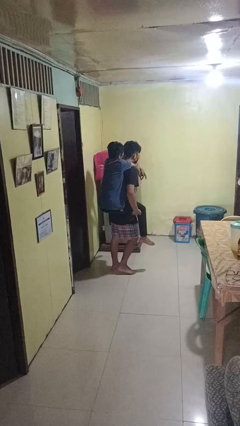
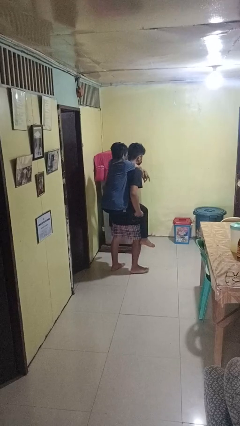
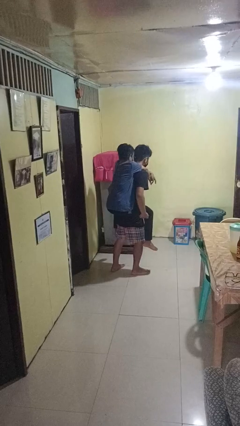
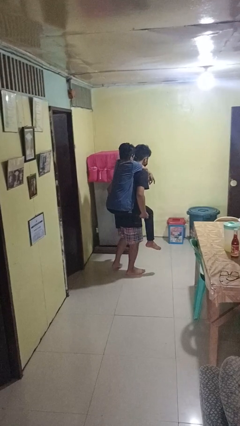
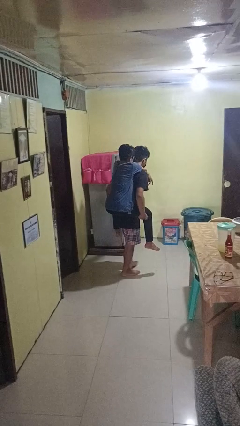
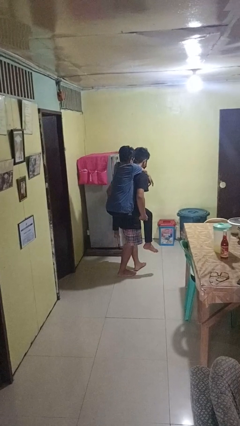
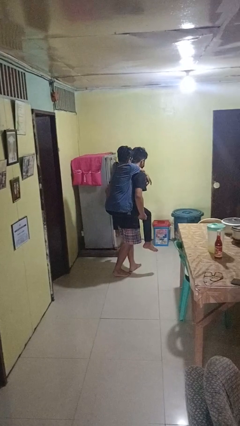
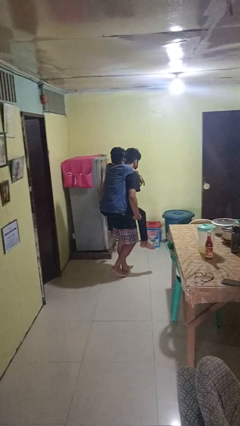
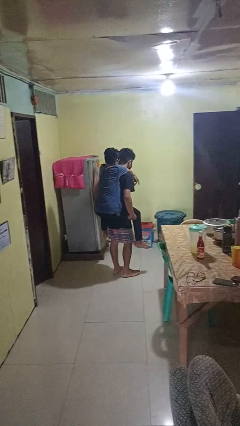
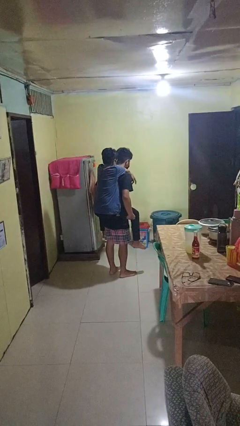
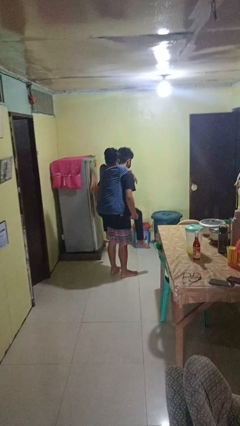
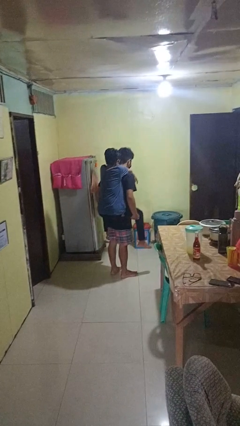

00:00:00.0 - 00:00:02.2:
person carries person on back

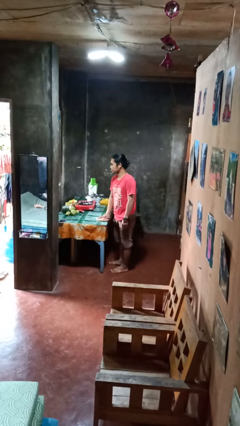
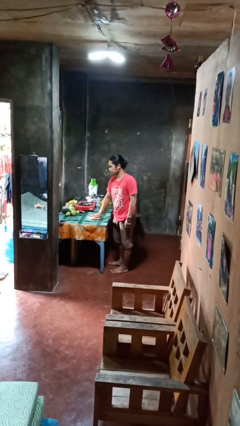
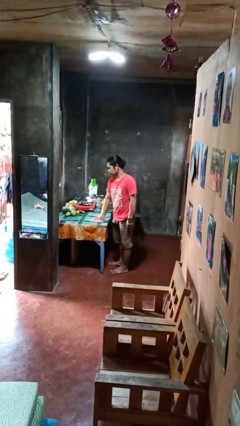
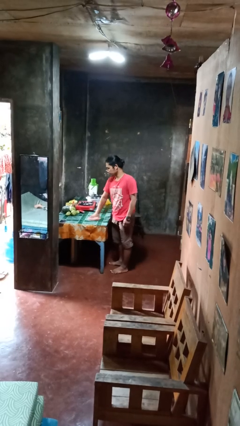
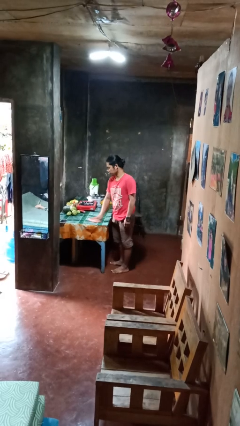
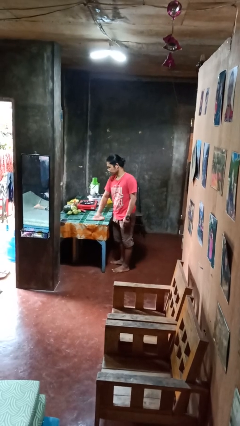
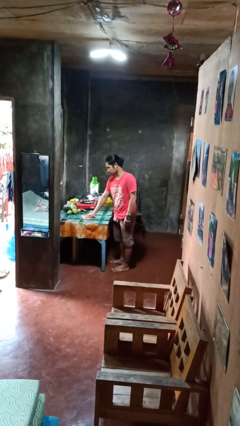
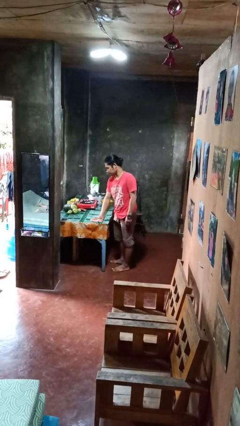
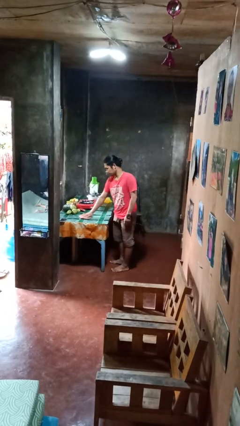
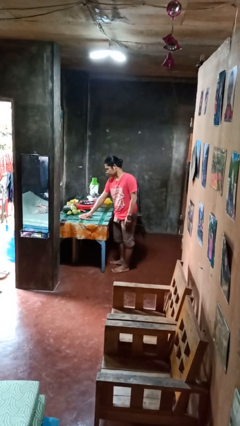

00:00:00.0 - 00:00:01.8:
person cleans table with rag

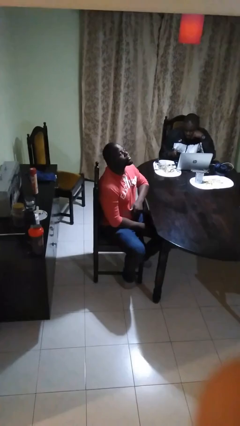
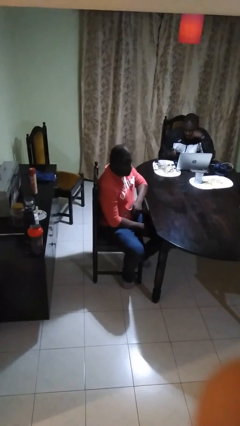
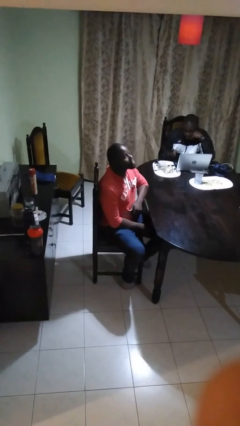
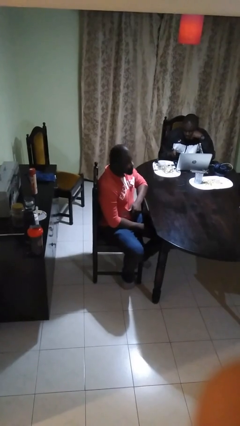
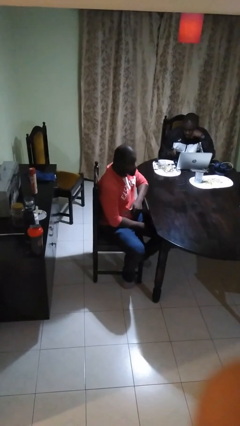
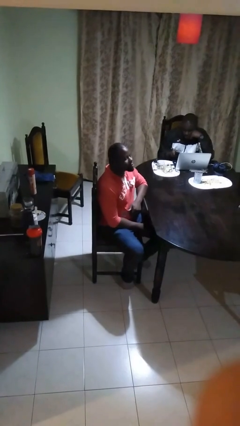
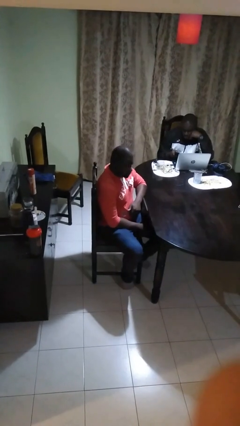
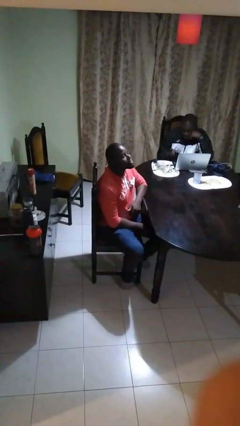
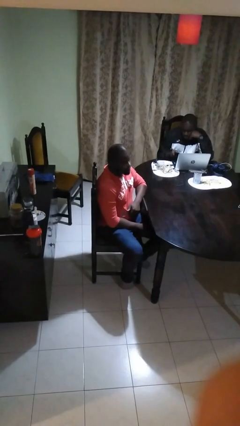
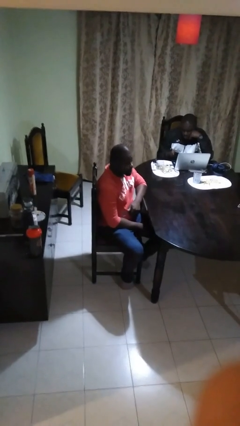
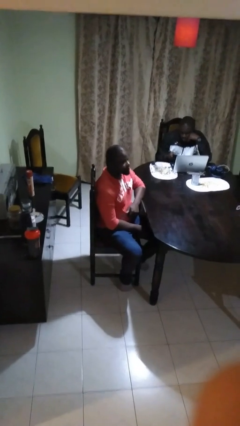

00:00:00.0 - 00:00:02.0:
person nods head

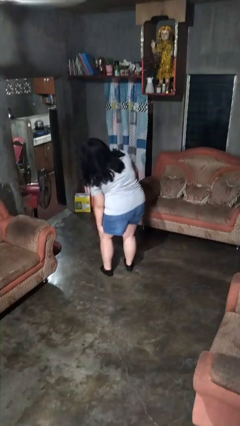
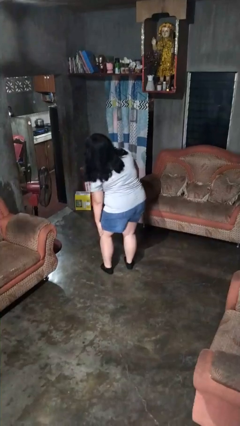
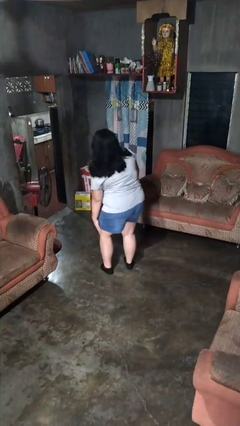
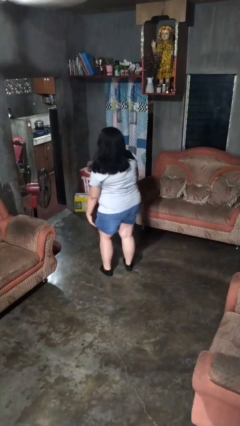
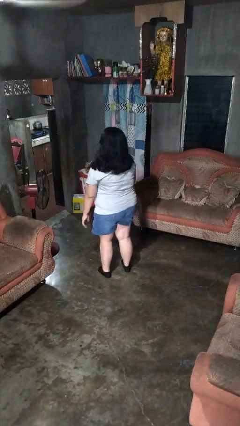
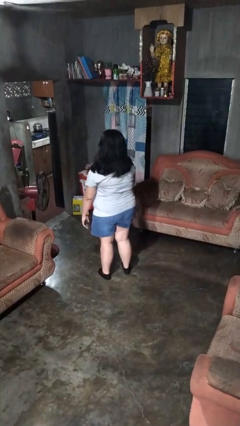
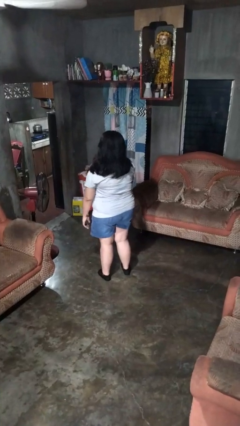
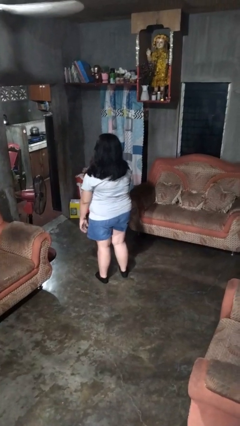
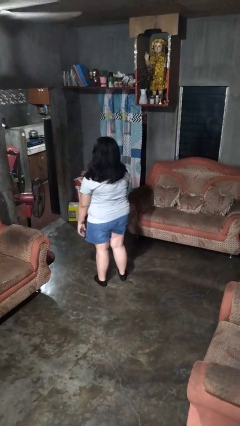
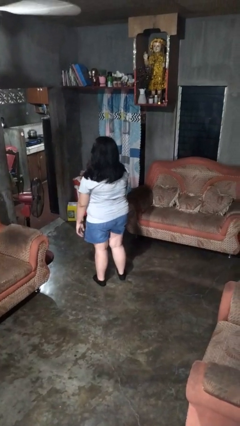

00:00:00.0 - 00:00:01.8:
person swats bug

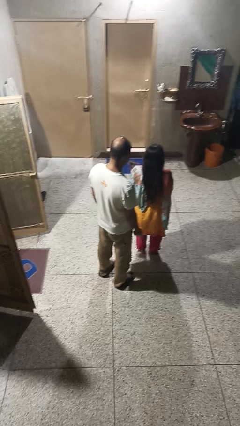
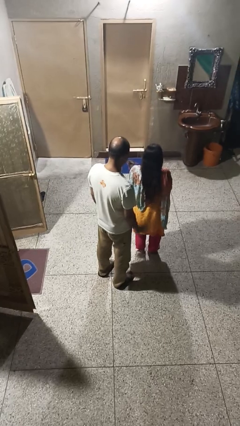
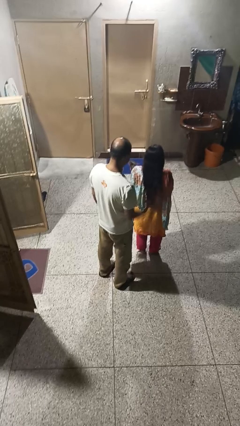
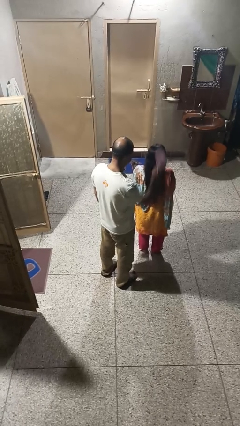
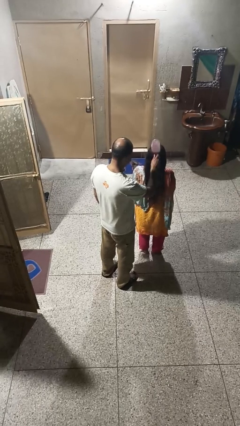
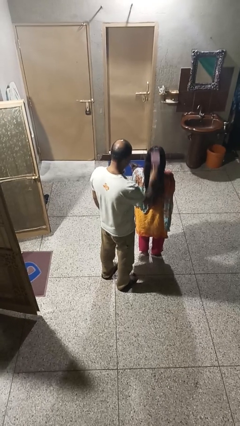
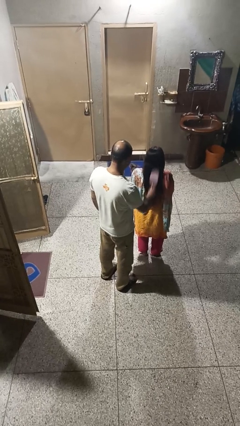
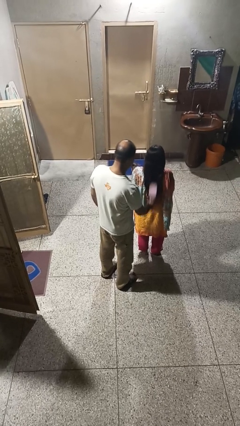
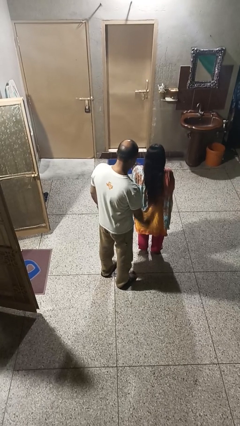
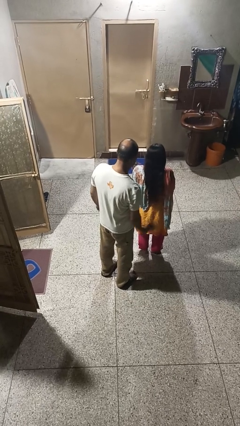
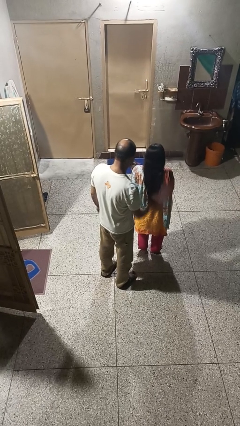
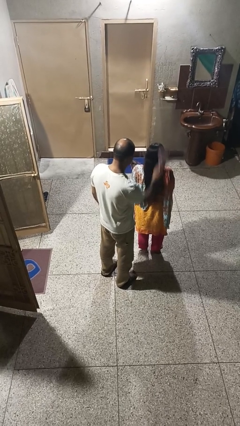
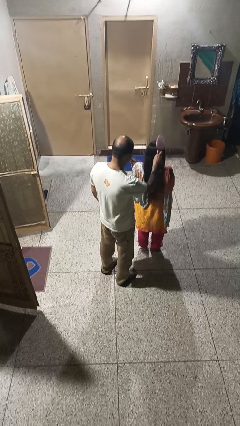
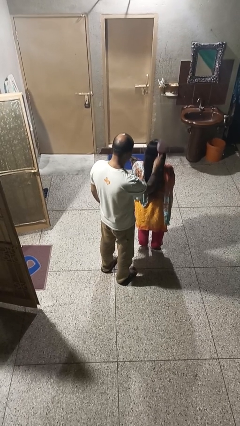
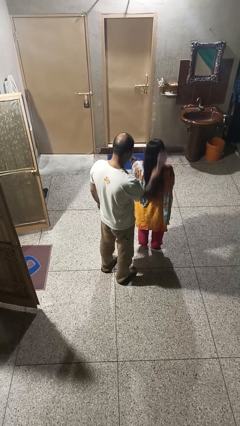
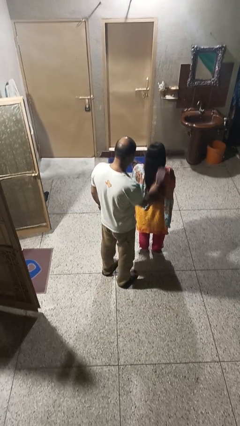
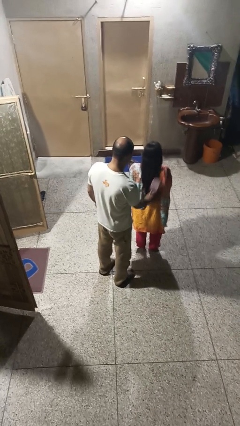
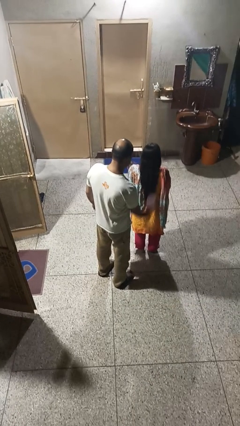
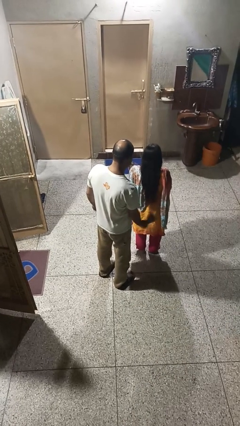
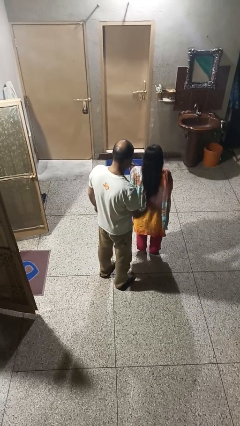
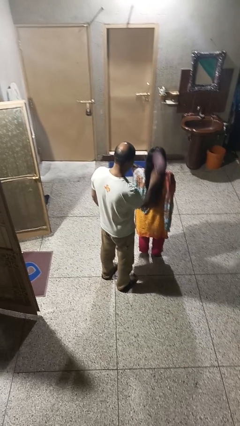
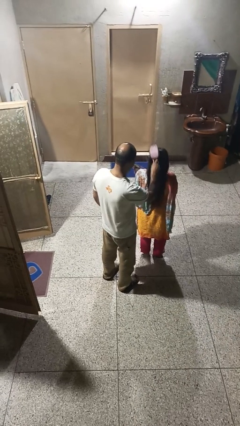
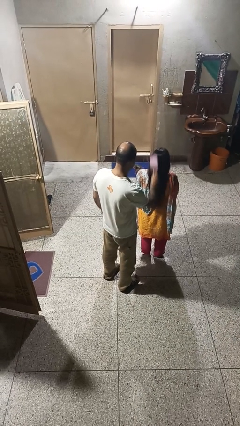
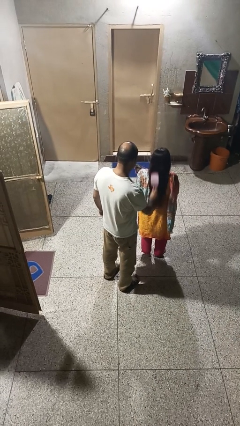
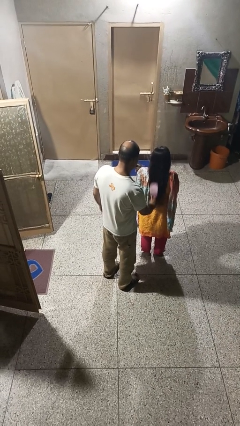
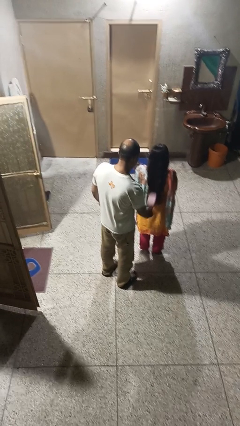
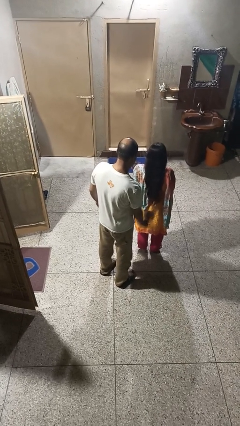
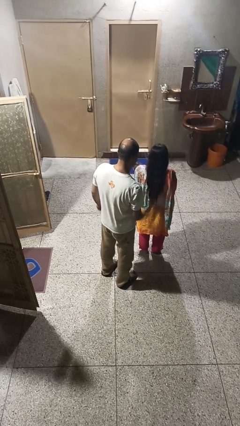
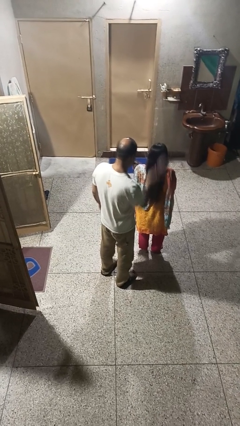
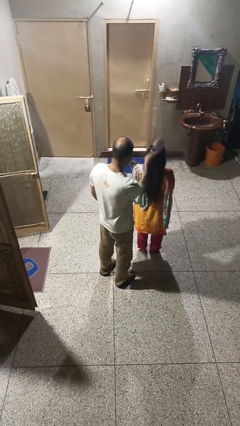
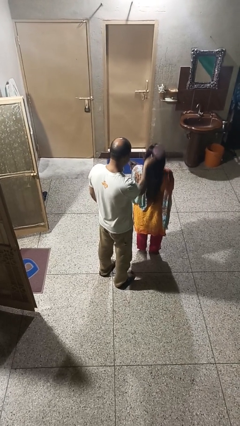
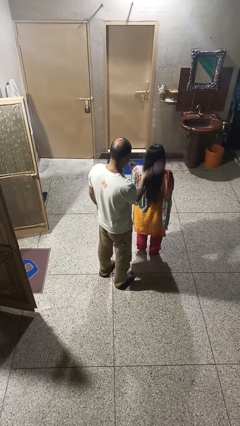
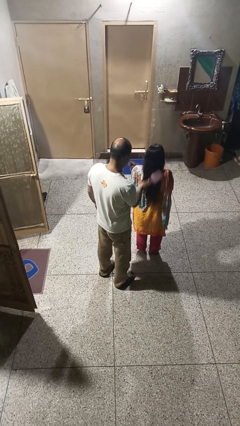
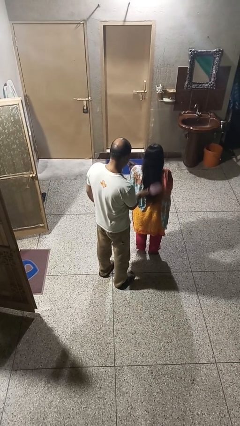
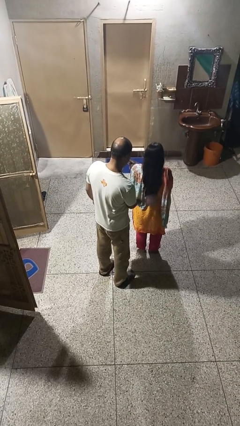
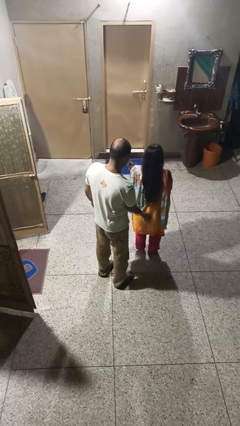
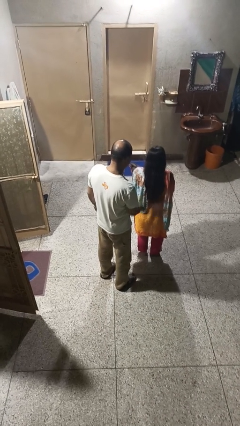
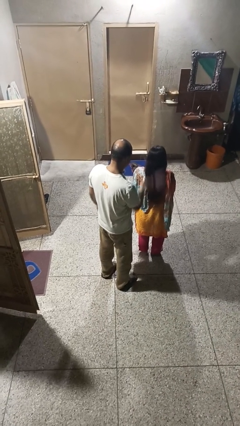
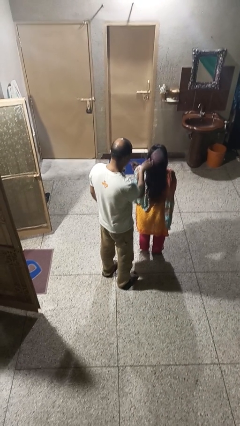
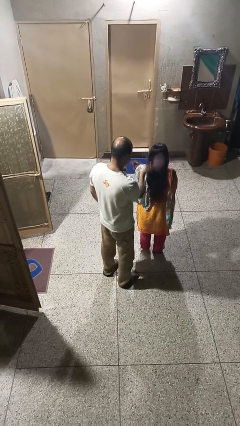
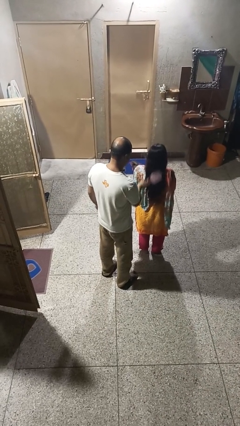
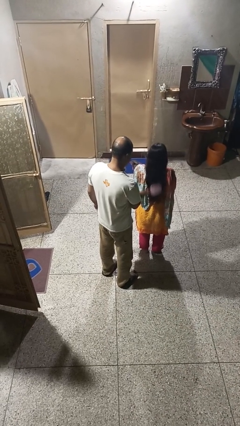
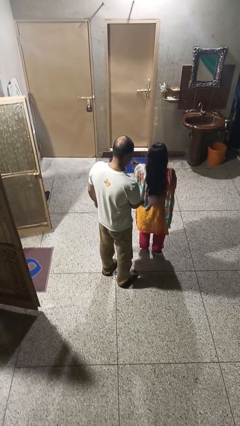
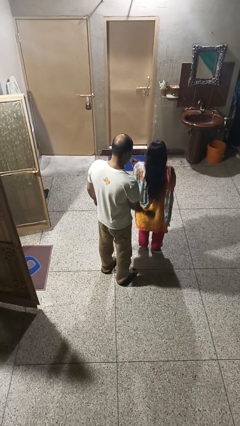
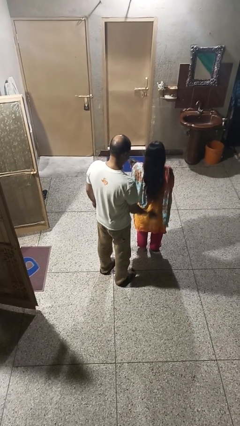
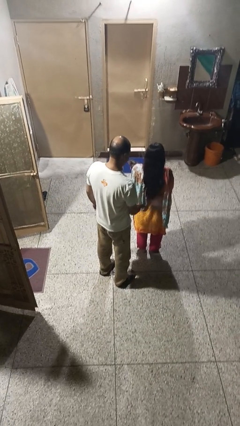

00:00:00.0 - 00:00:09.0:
person brushes hair of person

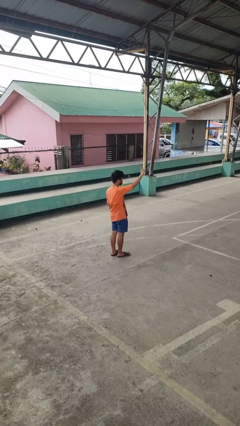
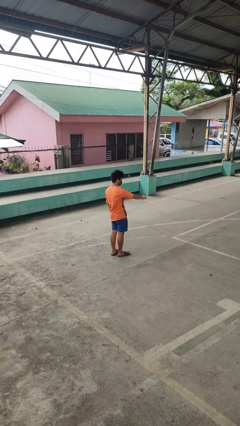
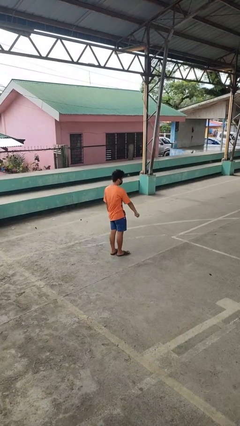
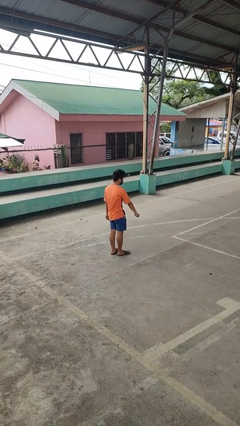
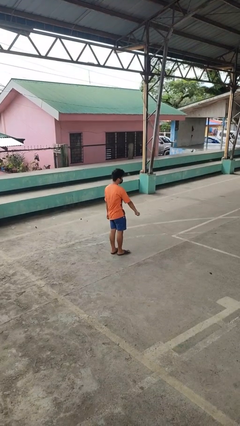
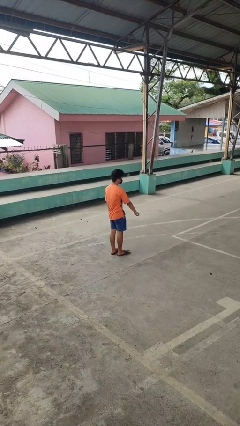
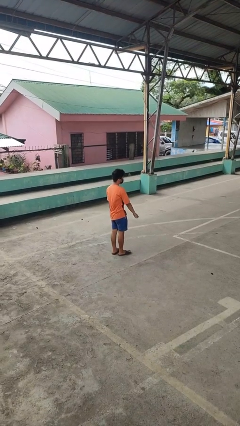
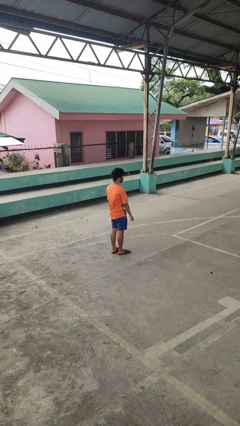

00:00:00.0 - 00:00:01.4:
person gestures swipe down
